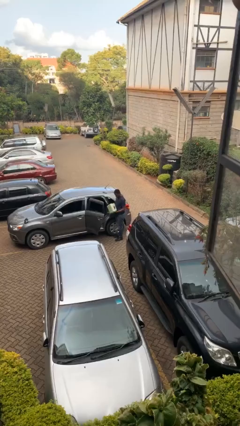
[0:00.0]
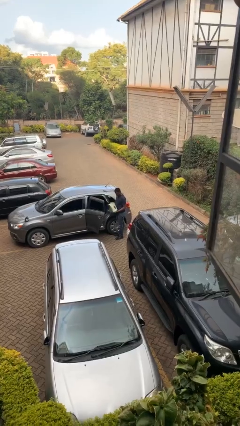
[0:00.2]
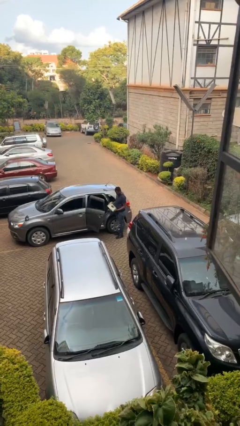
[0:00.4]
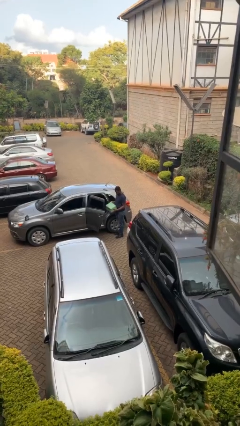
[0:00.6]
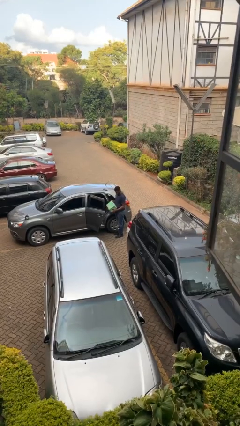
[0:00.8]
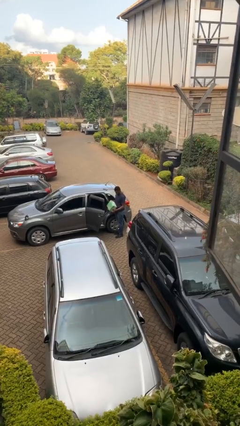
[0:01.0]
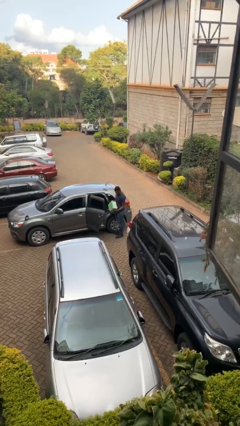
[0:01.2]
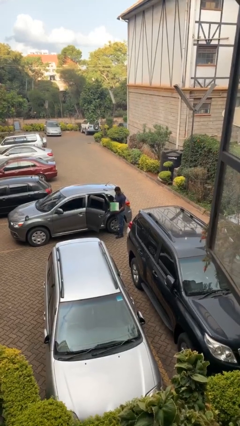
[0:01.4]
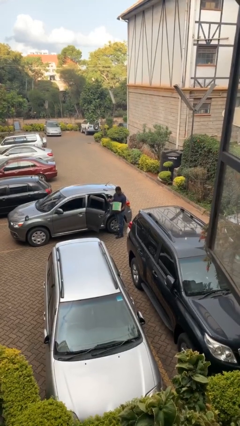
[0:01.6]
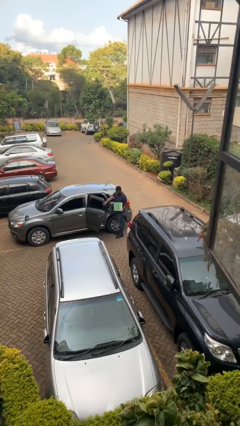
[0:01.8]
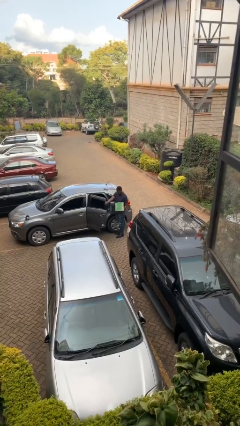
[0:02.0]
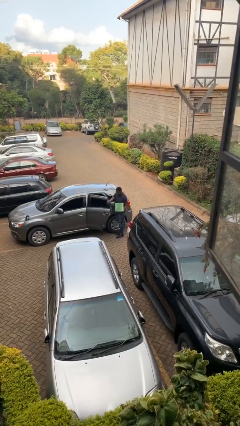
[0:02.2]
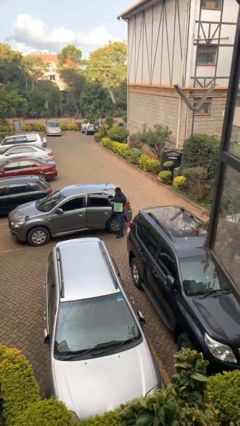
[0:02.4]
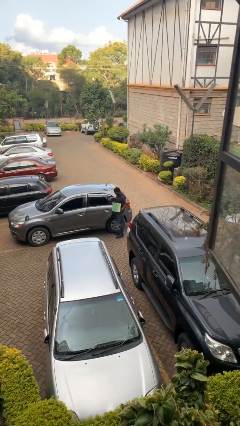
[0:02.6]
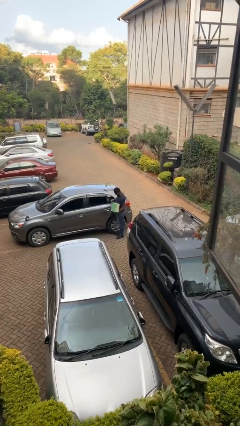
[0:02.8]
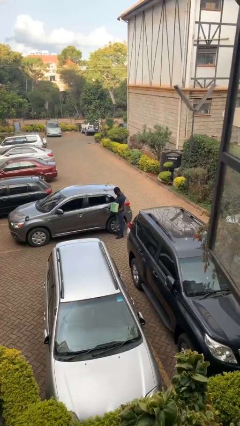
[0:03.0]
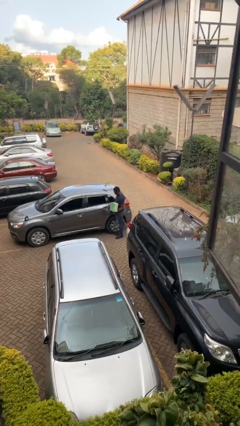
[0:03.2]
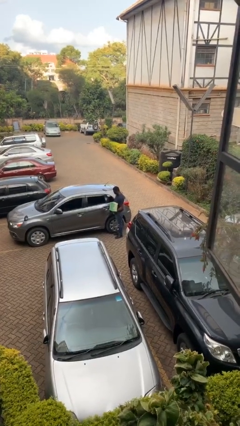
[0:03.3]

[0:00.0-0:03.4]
person closes car door

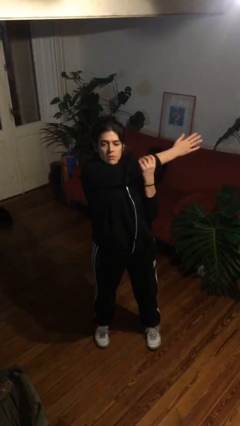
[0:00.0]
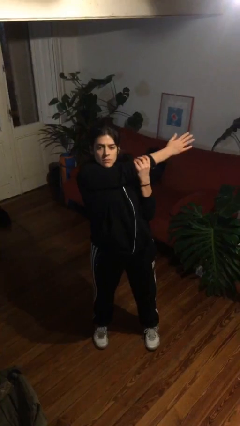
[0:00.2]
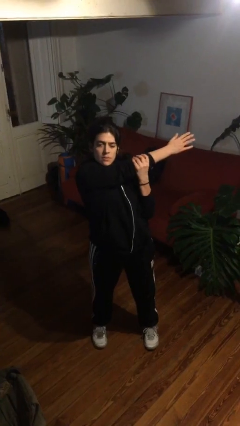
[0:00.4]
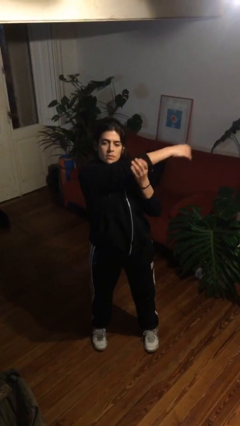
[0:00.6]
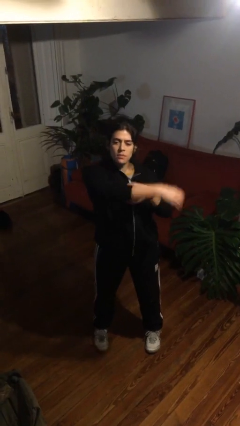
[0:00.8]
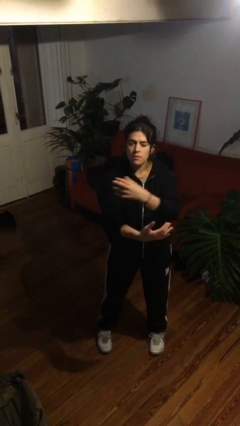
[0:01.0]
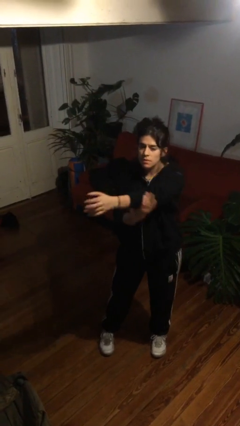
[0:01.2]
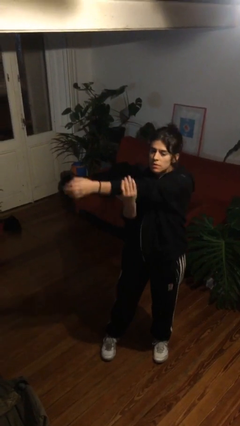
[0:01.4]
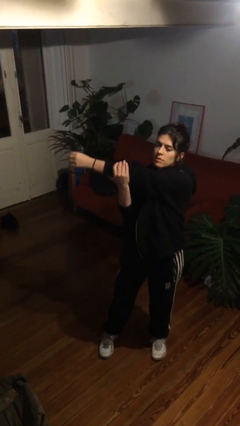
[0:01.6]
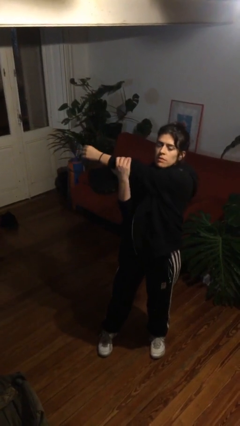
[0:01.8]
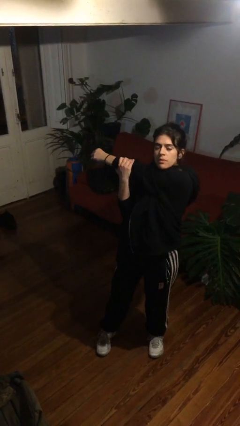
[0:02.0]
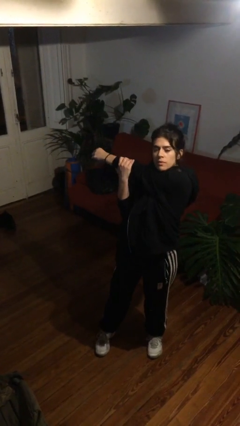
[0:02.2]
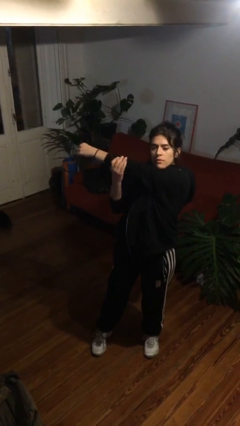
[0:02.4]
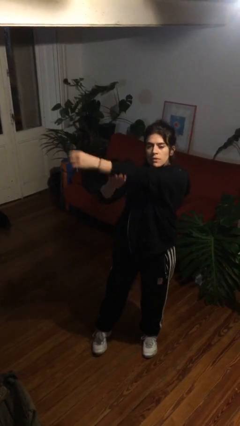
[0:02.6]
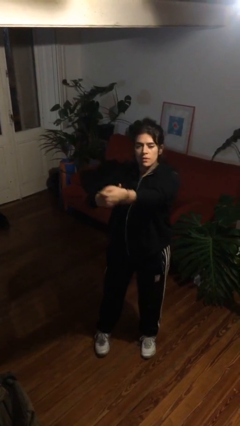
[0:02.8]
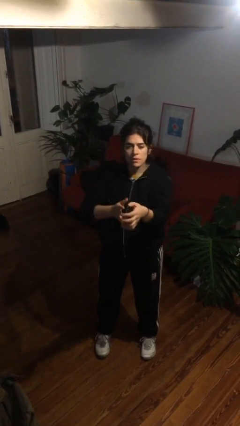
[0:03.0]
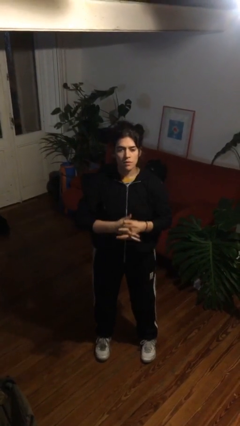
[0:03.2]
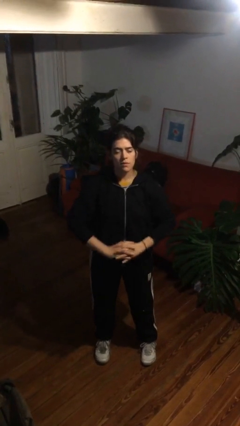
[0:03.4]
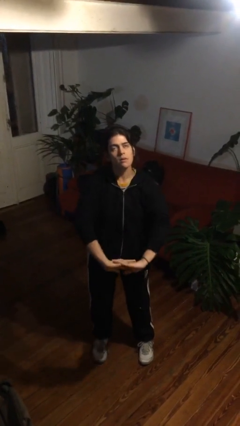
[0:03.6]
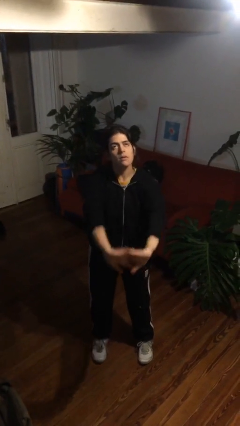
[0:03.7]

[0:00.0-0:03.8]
person stretches arms to side

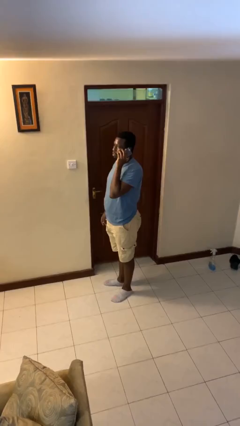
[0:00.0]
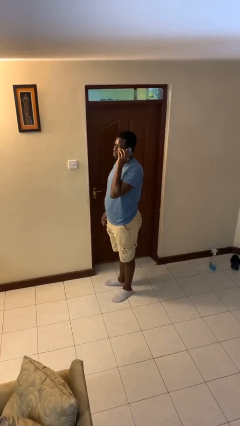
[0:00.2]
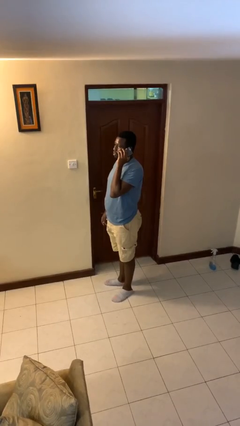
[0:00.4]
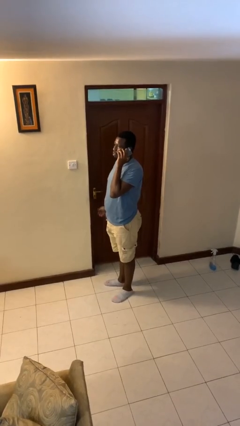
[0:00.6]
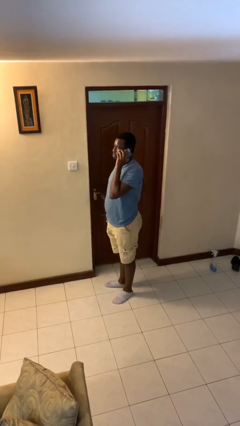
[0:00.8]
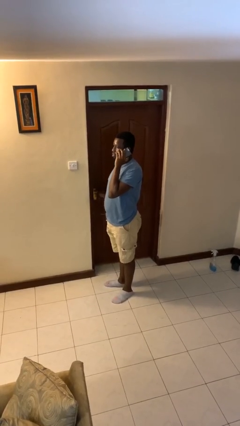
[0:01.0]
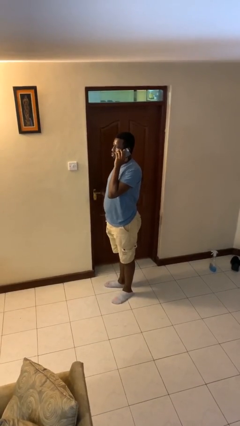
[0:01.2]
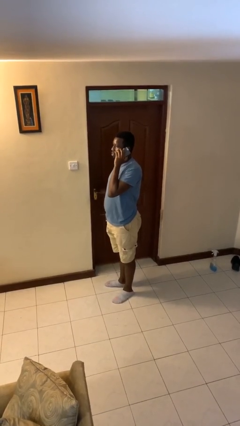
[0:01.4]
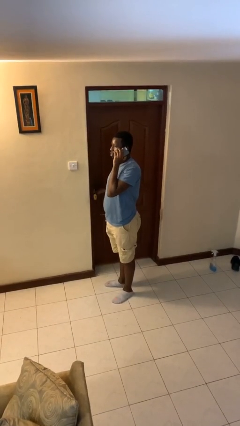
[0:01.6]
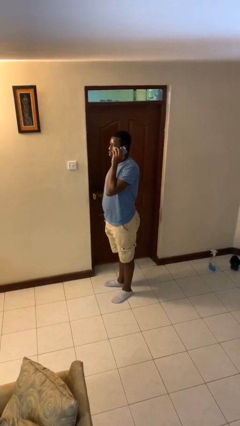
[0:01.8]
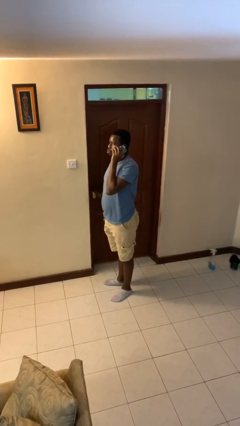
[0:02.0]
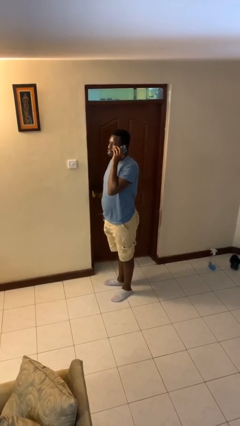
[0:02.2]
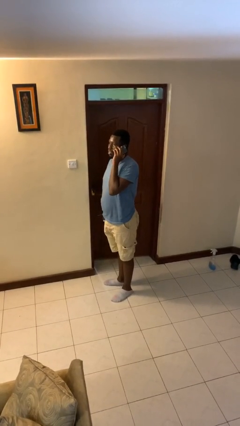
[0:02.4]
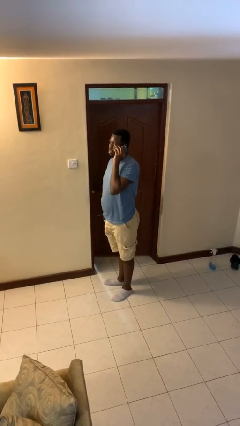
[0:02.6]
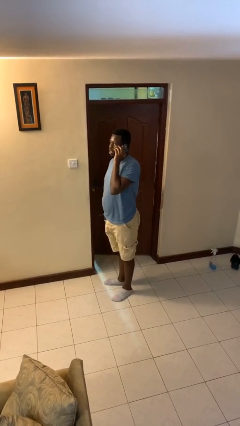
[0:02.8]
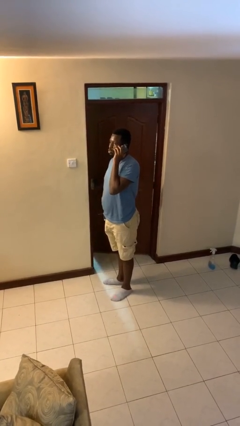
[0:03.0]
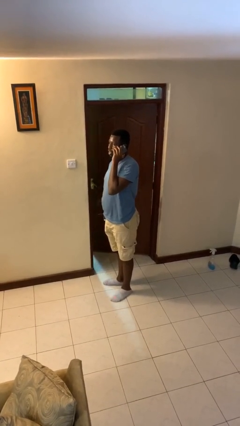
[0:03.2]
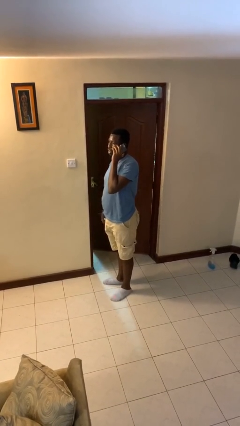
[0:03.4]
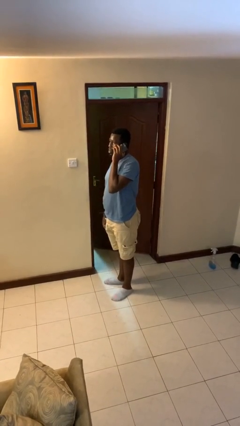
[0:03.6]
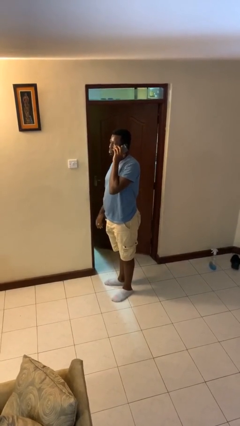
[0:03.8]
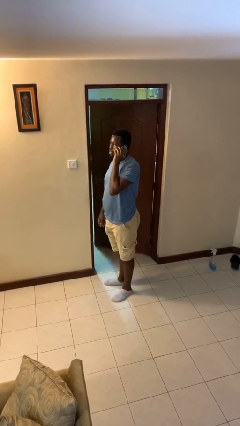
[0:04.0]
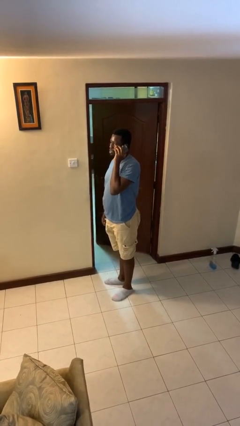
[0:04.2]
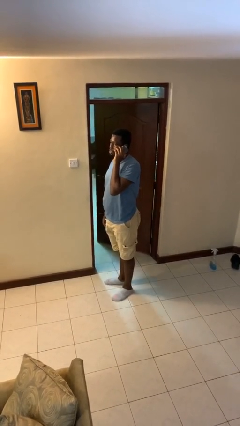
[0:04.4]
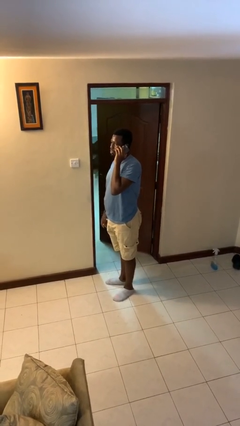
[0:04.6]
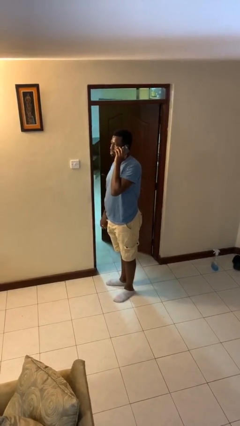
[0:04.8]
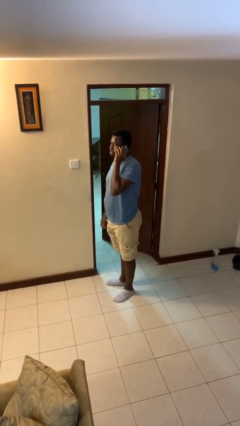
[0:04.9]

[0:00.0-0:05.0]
person opens facility door

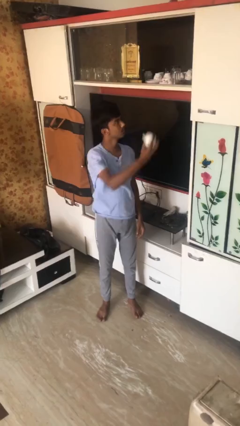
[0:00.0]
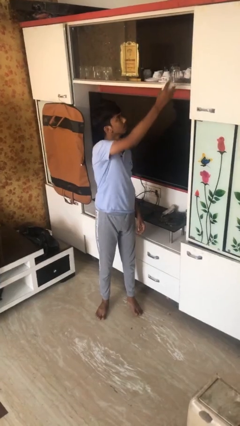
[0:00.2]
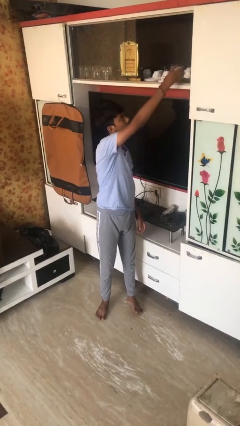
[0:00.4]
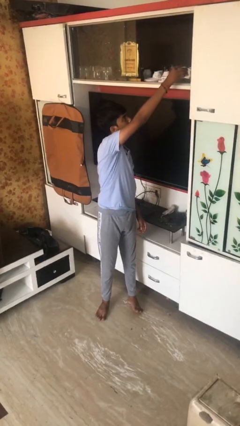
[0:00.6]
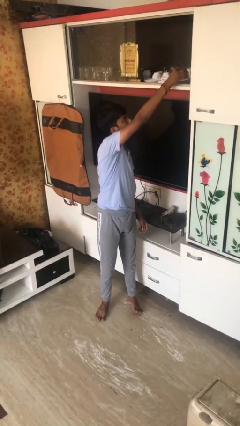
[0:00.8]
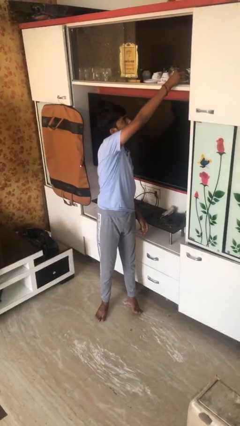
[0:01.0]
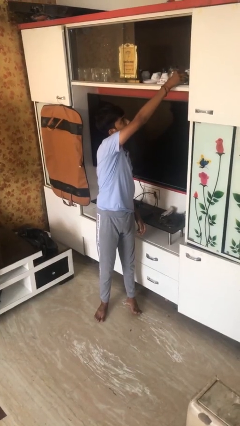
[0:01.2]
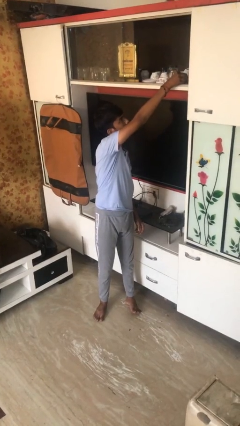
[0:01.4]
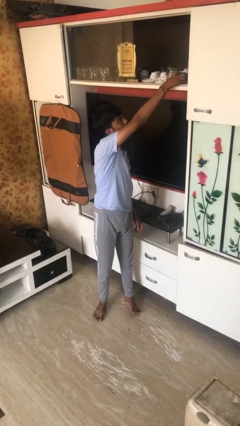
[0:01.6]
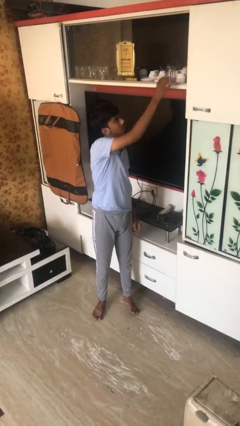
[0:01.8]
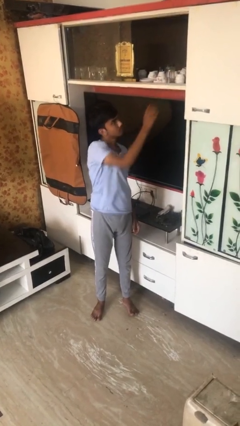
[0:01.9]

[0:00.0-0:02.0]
person puts object in cabinet

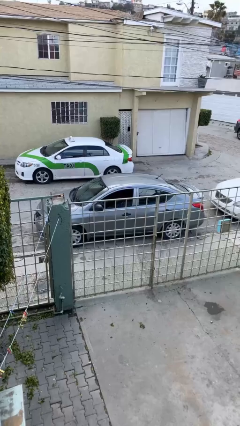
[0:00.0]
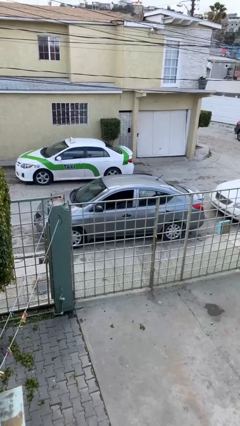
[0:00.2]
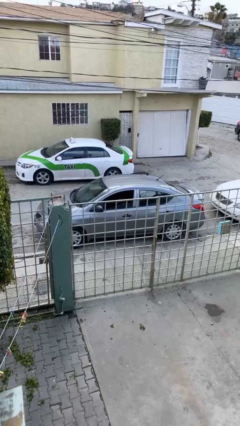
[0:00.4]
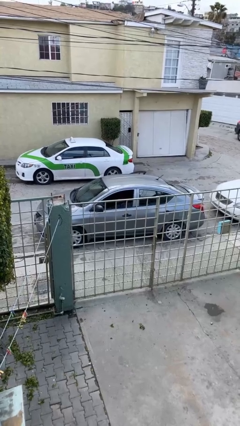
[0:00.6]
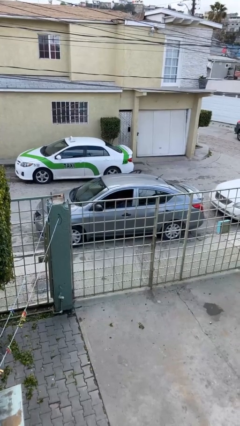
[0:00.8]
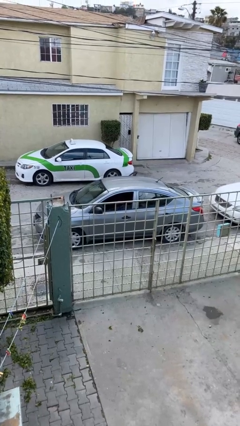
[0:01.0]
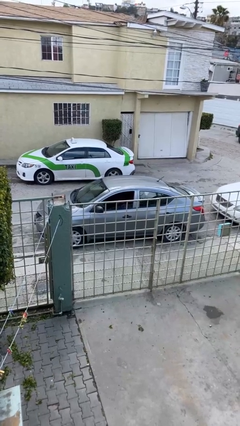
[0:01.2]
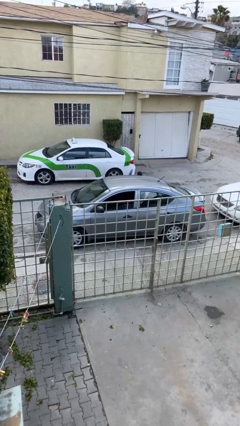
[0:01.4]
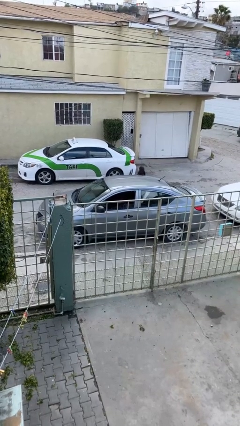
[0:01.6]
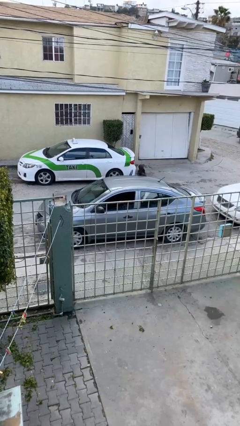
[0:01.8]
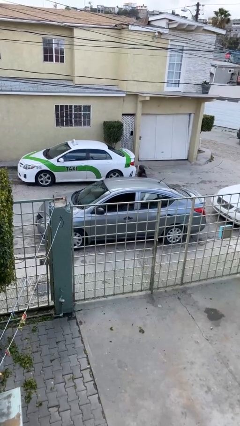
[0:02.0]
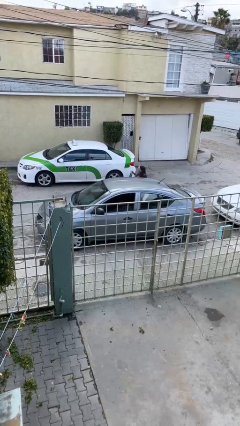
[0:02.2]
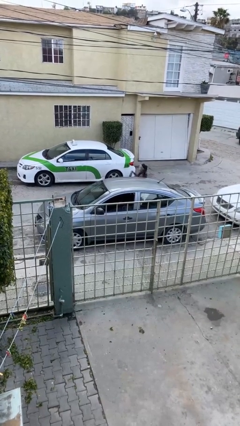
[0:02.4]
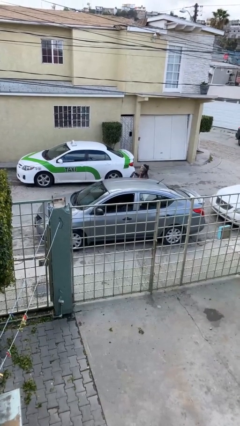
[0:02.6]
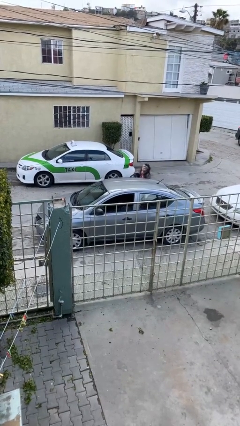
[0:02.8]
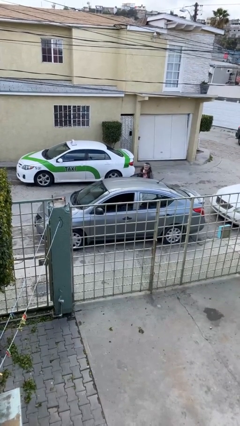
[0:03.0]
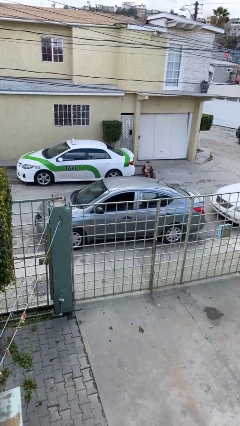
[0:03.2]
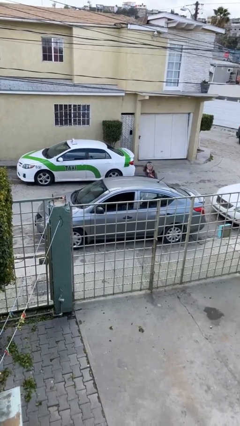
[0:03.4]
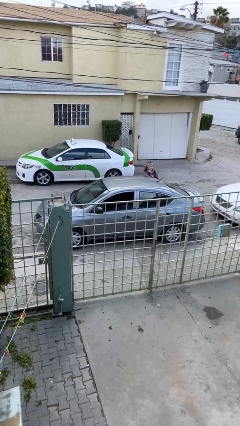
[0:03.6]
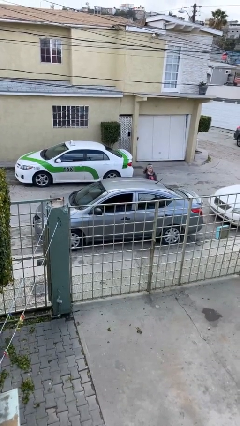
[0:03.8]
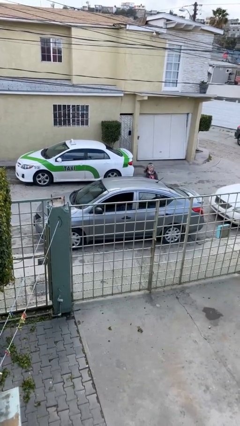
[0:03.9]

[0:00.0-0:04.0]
car drops off person
